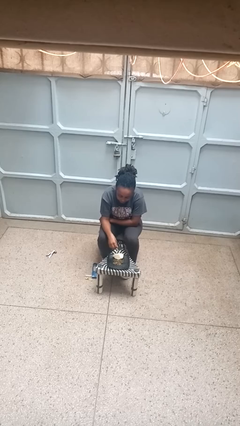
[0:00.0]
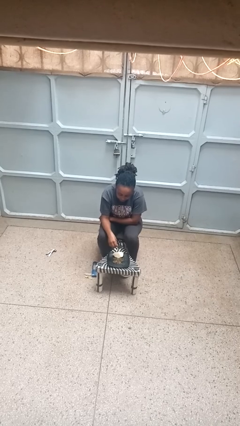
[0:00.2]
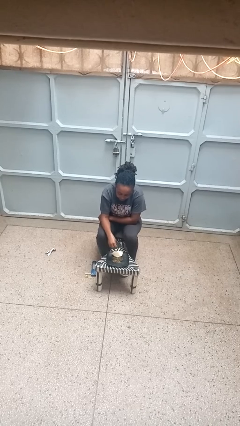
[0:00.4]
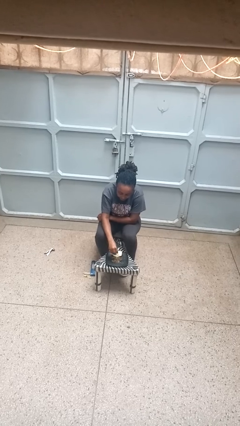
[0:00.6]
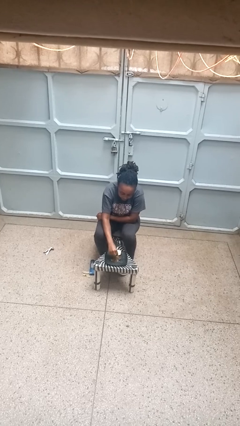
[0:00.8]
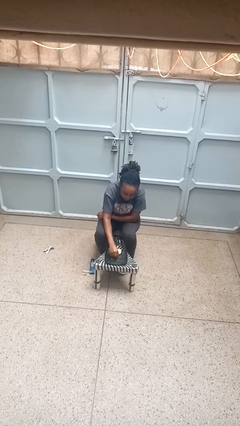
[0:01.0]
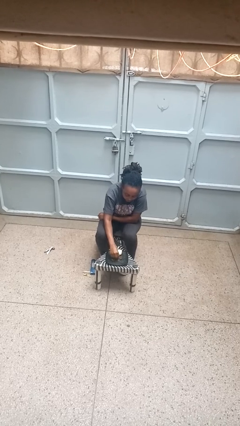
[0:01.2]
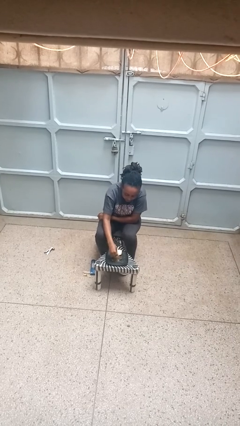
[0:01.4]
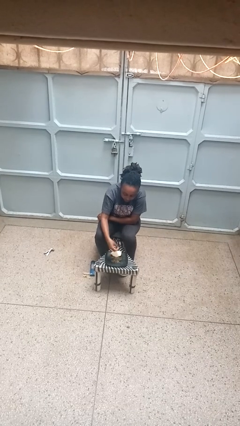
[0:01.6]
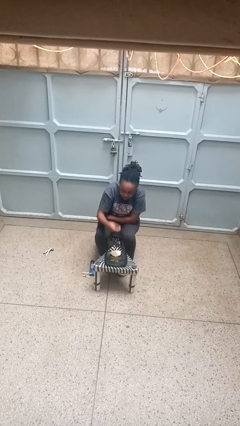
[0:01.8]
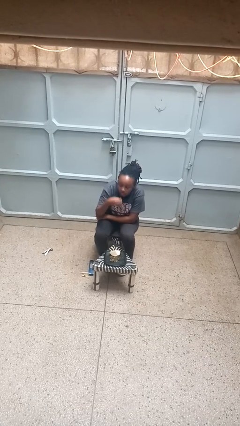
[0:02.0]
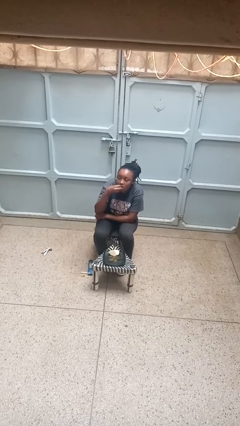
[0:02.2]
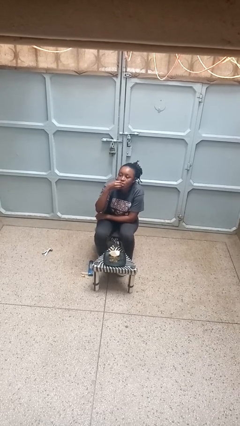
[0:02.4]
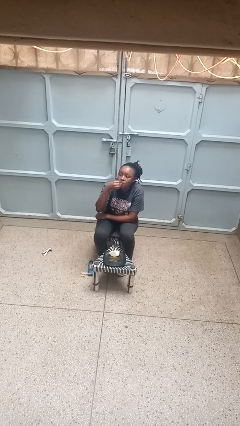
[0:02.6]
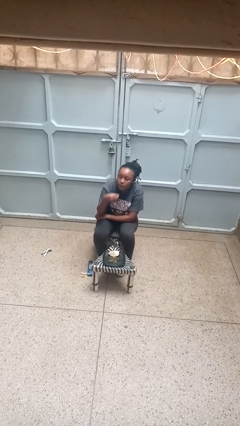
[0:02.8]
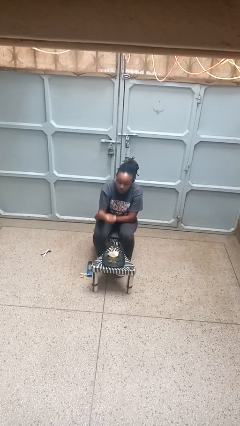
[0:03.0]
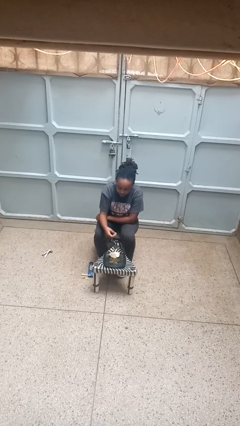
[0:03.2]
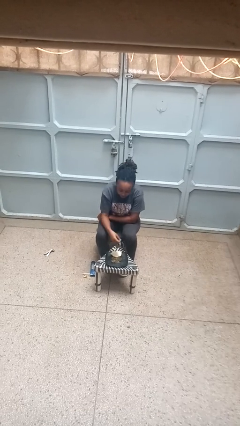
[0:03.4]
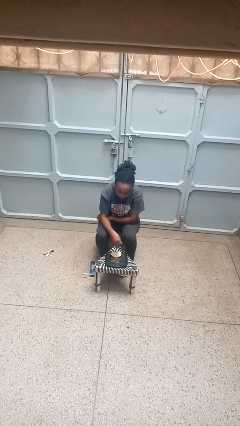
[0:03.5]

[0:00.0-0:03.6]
person eats with hands

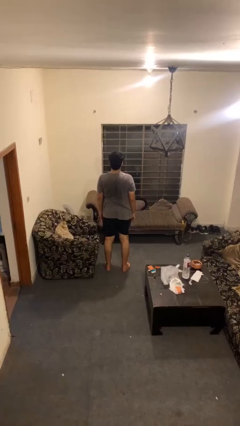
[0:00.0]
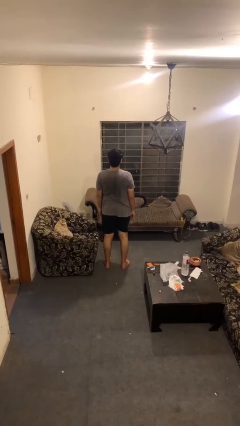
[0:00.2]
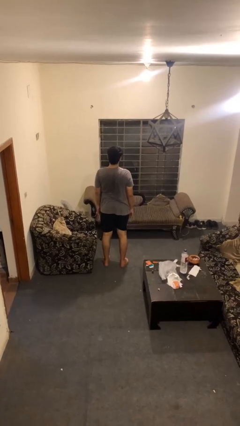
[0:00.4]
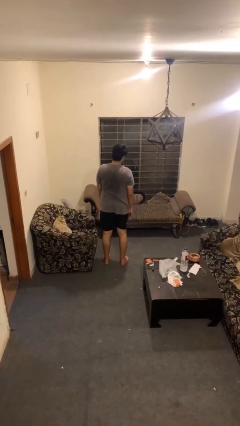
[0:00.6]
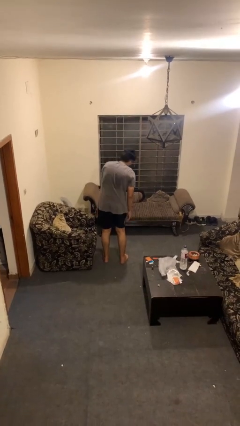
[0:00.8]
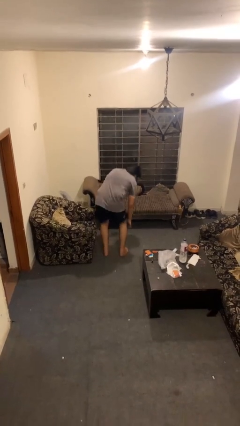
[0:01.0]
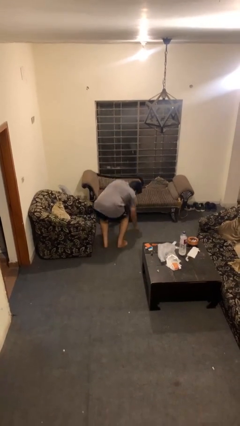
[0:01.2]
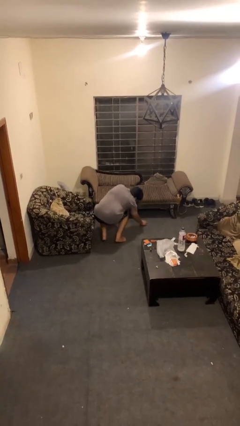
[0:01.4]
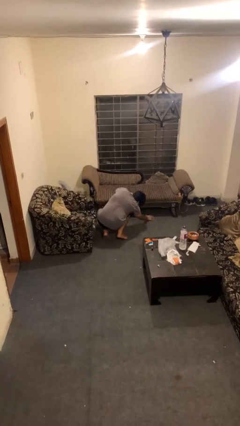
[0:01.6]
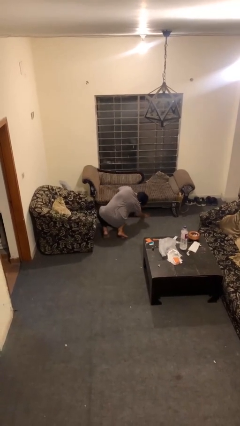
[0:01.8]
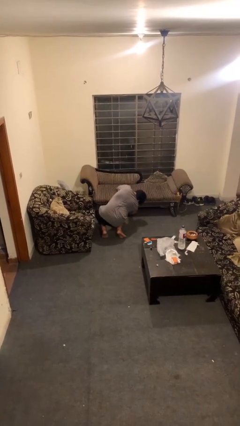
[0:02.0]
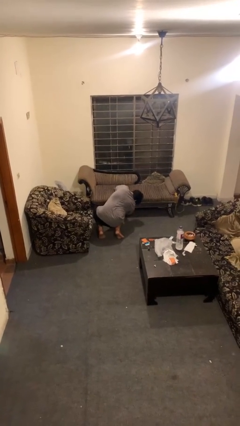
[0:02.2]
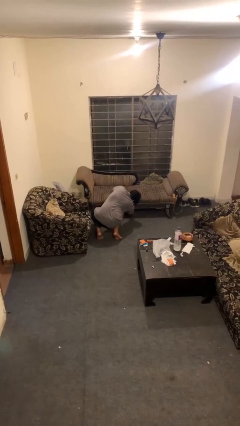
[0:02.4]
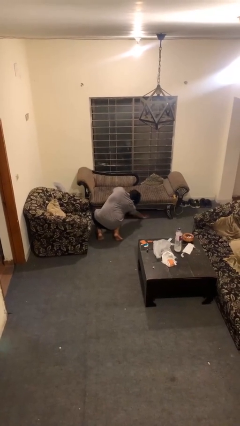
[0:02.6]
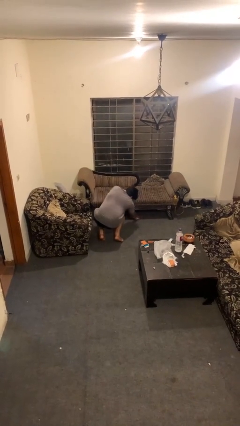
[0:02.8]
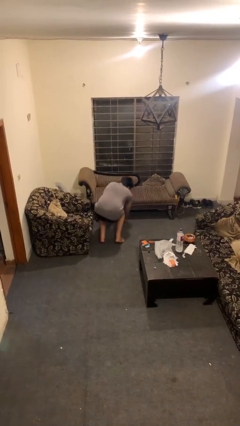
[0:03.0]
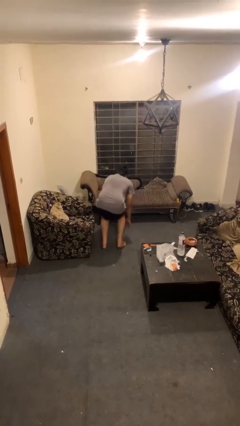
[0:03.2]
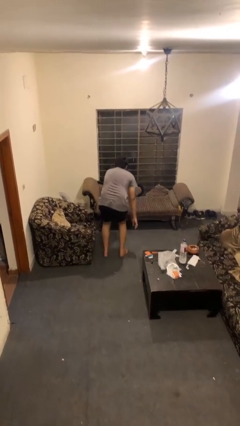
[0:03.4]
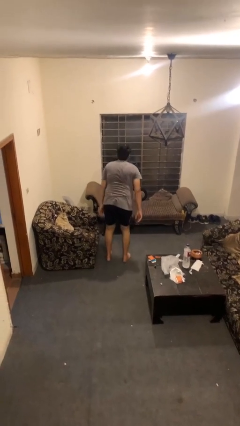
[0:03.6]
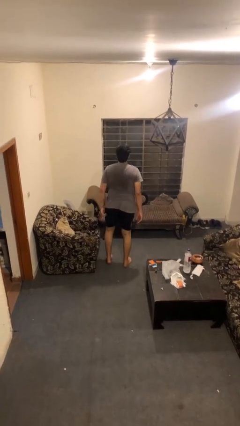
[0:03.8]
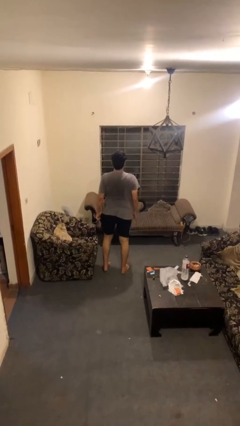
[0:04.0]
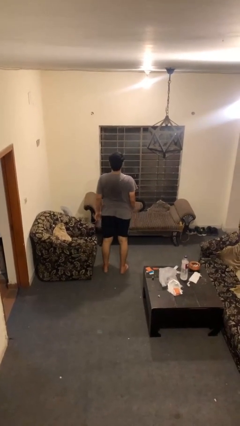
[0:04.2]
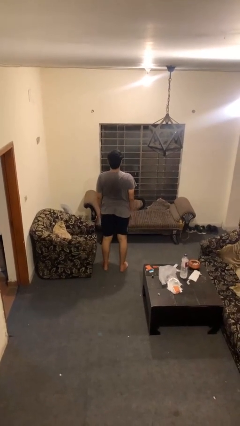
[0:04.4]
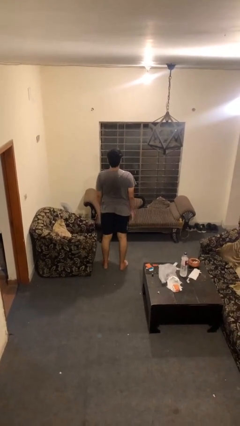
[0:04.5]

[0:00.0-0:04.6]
person searches under couch

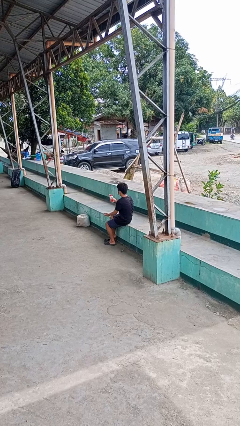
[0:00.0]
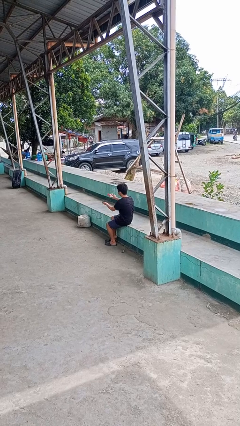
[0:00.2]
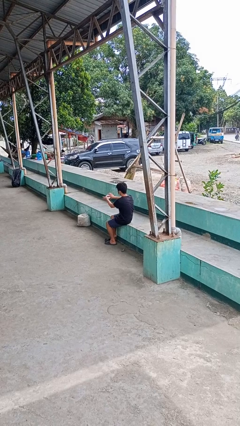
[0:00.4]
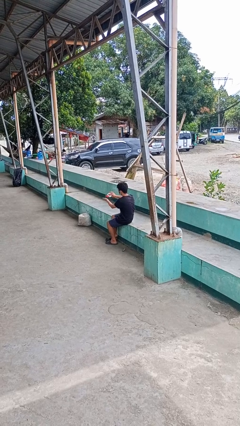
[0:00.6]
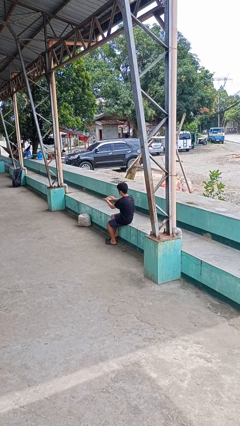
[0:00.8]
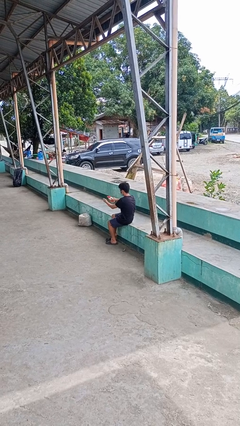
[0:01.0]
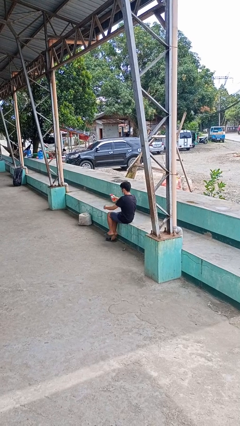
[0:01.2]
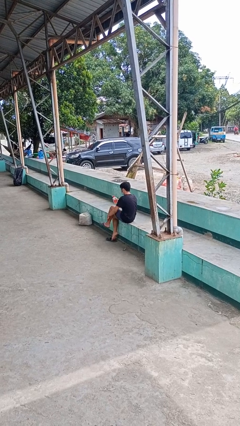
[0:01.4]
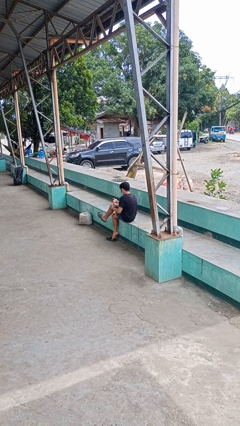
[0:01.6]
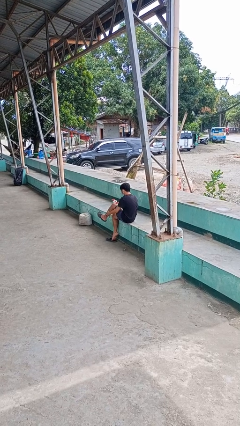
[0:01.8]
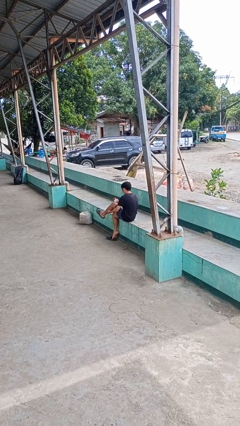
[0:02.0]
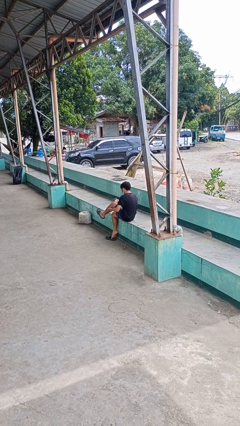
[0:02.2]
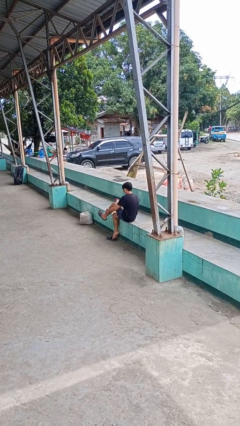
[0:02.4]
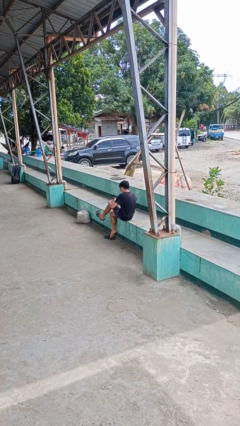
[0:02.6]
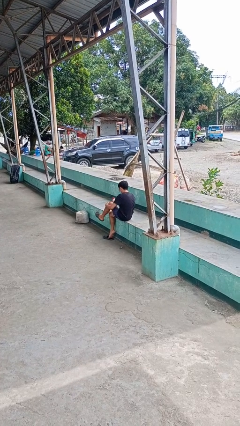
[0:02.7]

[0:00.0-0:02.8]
person applies sunscreen

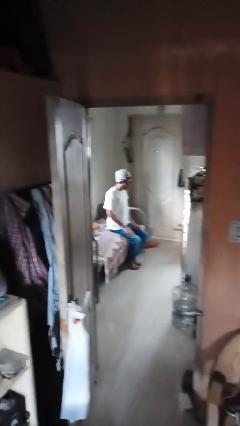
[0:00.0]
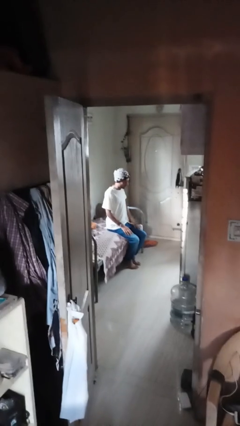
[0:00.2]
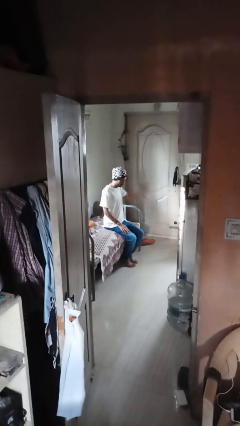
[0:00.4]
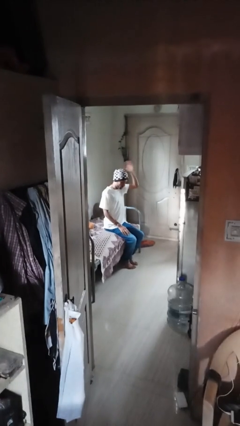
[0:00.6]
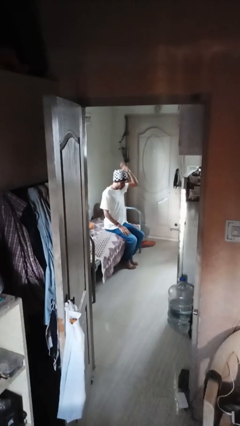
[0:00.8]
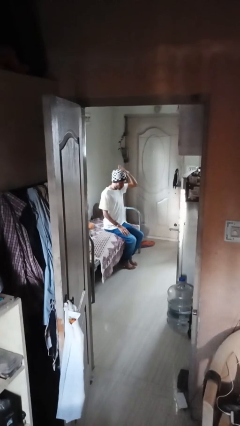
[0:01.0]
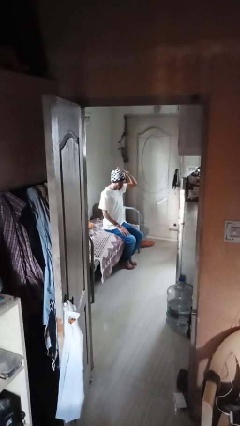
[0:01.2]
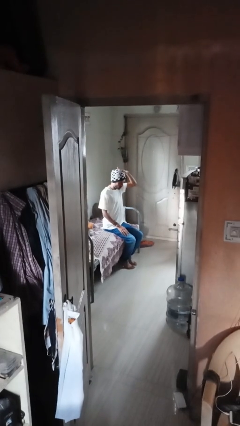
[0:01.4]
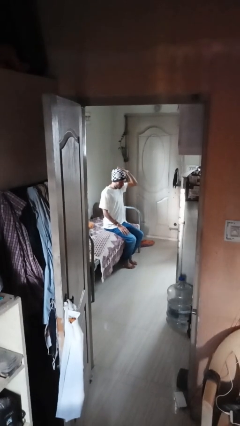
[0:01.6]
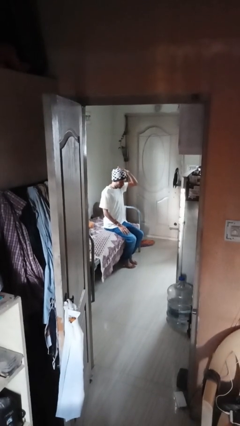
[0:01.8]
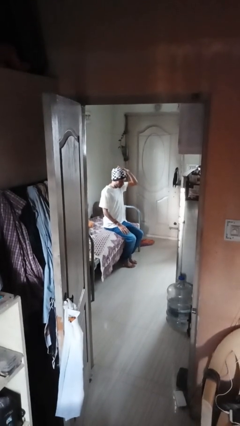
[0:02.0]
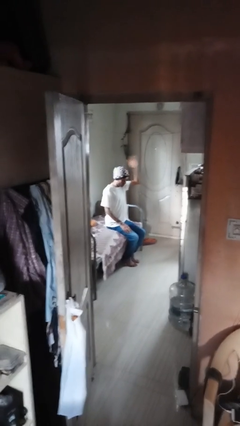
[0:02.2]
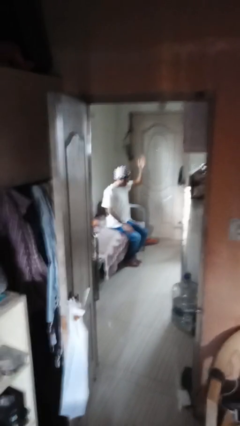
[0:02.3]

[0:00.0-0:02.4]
person pats head

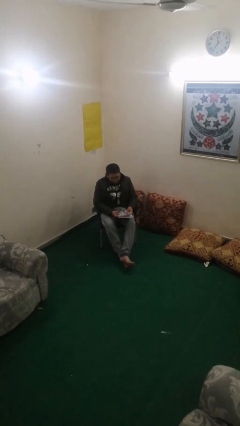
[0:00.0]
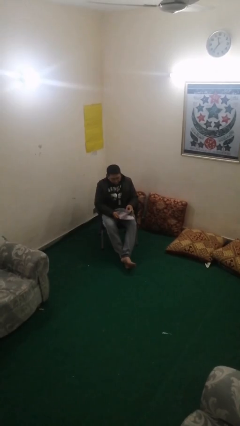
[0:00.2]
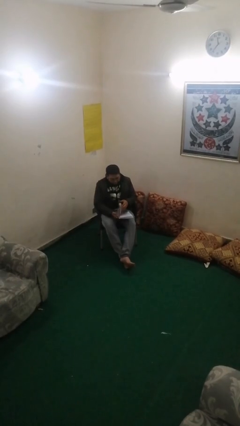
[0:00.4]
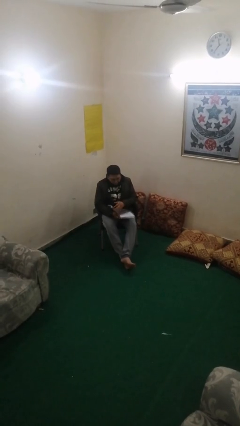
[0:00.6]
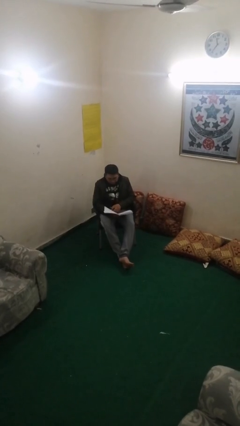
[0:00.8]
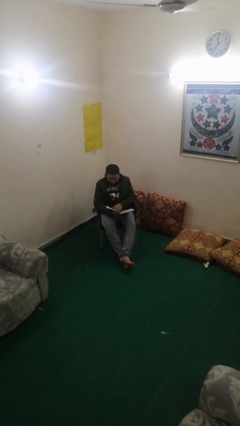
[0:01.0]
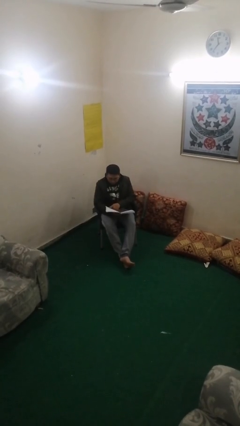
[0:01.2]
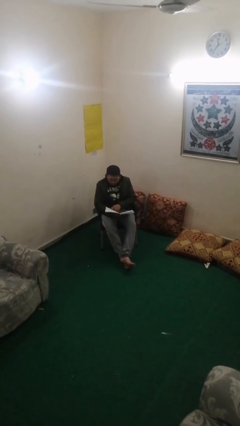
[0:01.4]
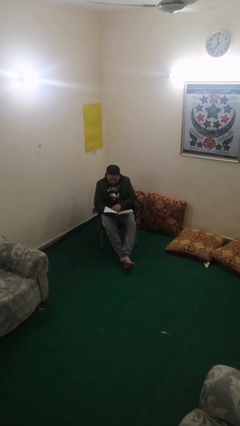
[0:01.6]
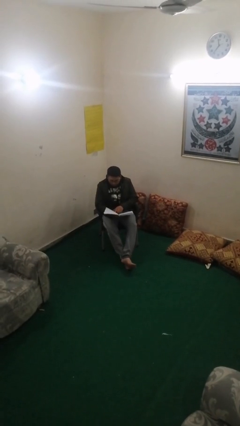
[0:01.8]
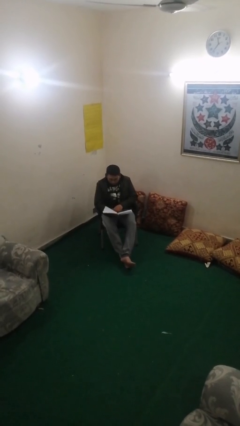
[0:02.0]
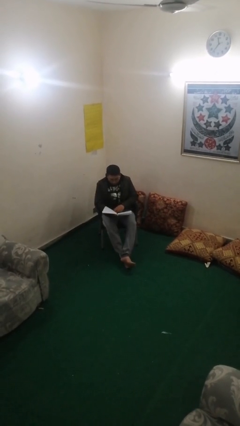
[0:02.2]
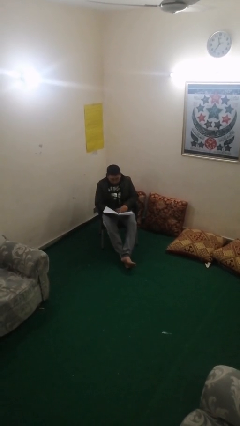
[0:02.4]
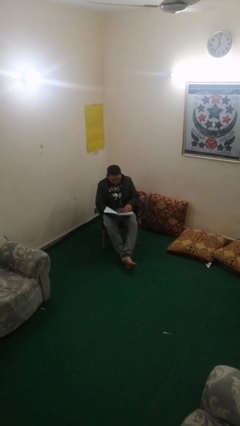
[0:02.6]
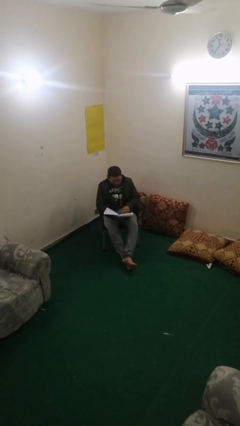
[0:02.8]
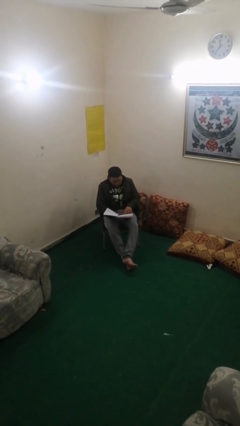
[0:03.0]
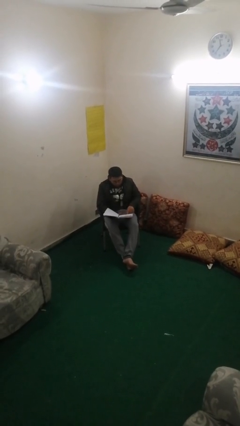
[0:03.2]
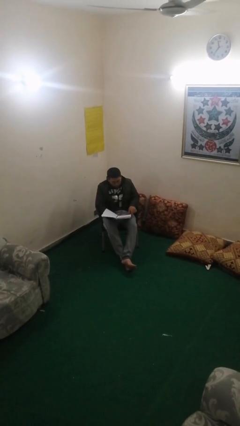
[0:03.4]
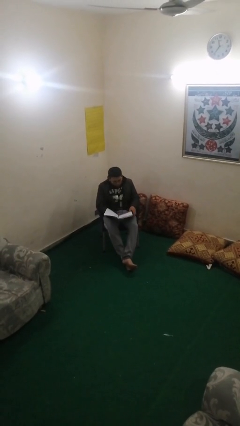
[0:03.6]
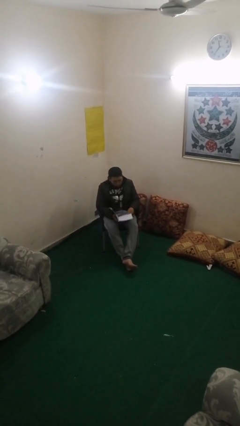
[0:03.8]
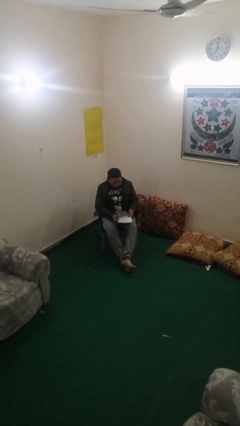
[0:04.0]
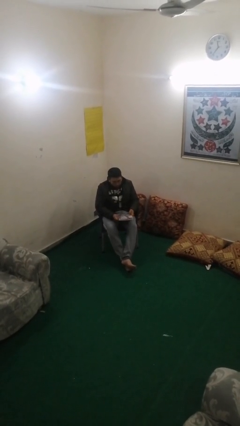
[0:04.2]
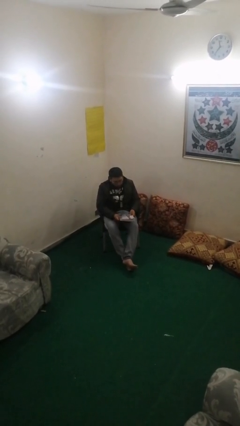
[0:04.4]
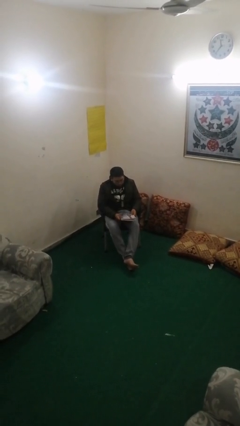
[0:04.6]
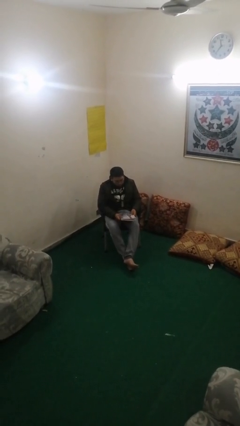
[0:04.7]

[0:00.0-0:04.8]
person reads document
